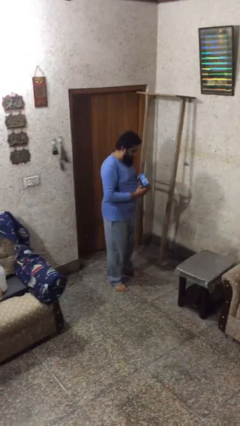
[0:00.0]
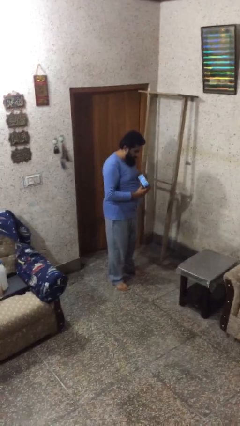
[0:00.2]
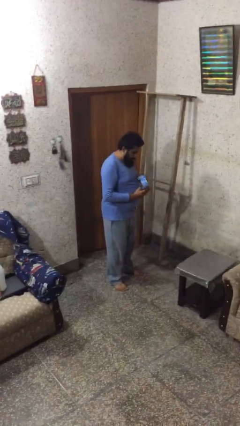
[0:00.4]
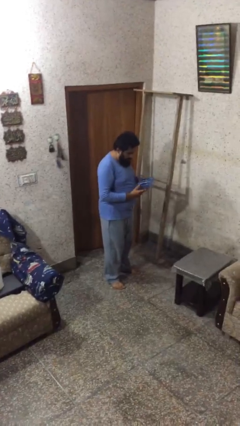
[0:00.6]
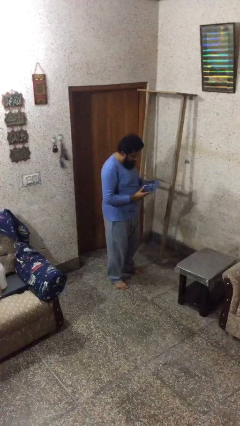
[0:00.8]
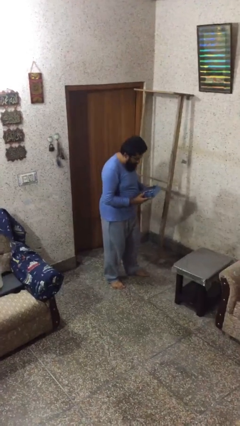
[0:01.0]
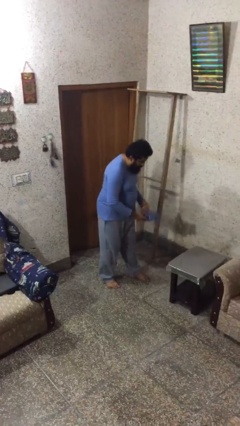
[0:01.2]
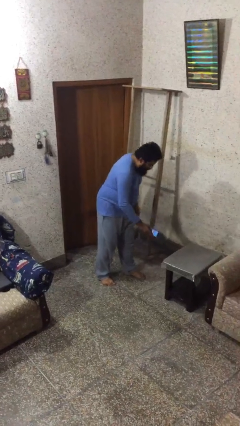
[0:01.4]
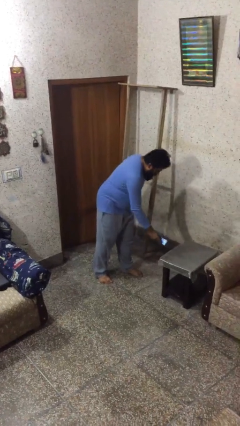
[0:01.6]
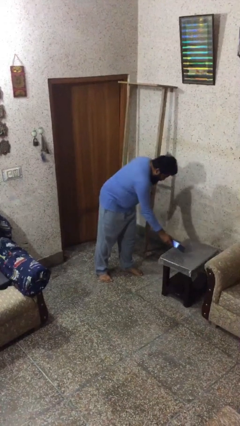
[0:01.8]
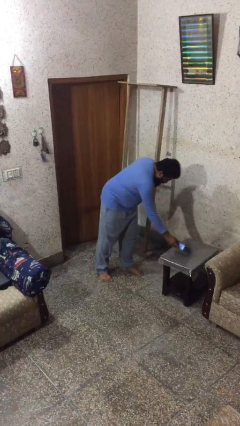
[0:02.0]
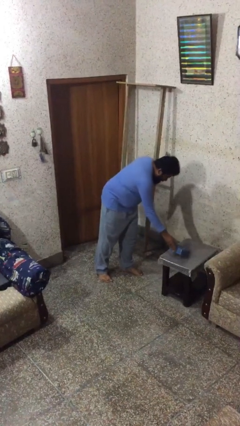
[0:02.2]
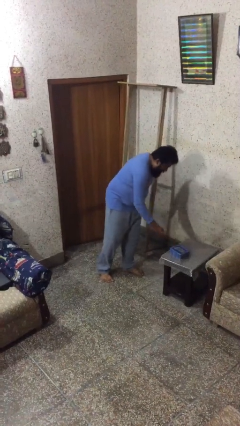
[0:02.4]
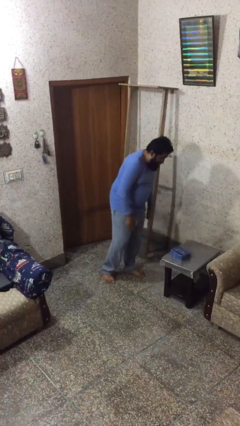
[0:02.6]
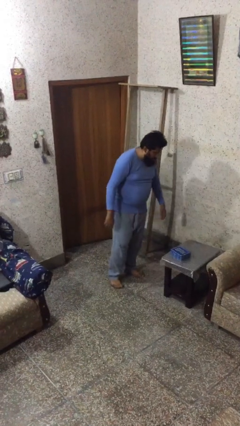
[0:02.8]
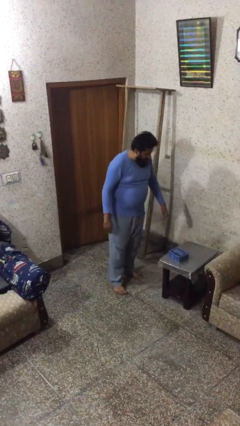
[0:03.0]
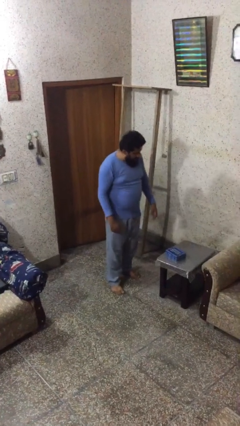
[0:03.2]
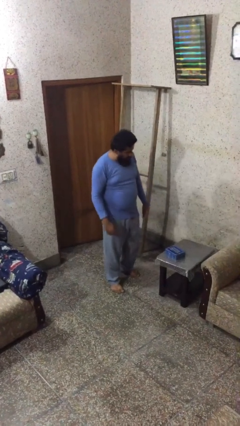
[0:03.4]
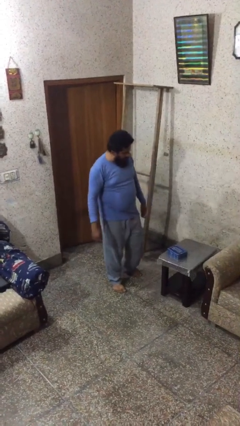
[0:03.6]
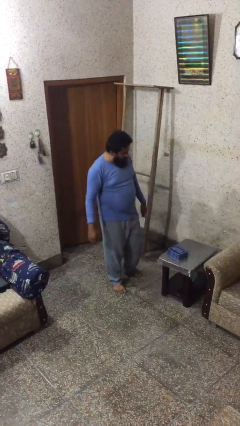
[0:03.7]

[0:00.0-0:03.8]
person puts down object on table

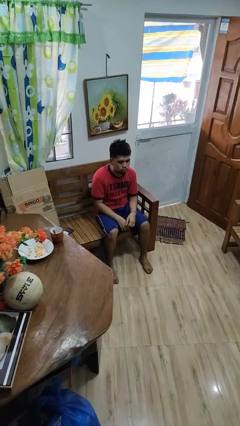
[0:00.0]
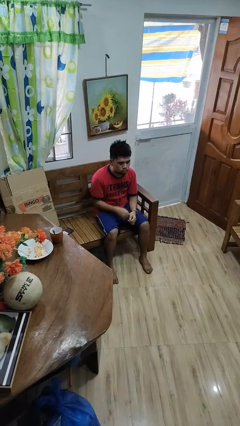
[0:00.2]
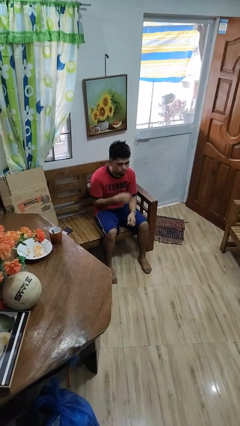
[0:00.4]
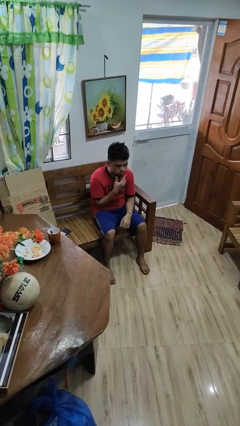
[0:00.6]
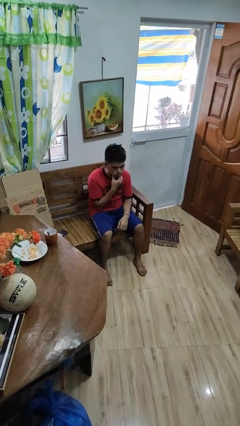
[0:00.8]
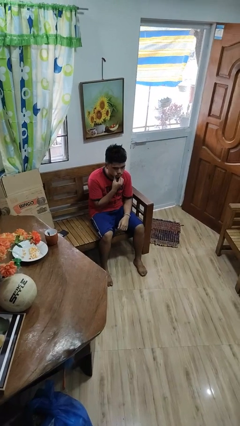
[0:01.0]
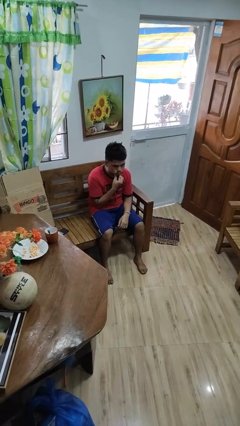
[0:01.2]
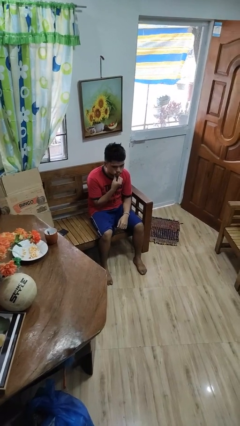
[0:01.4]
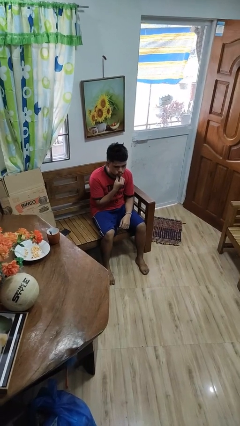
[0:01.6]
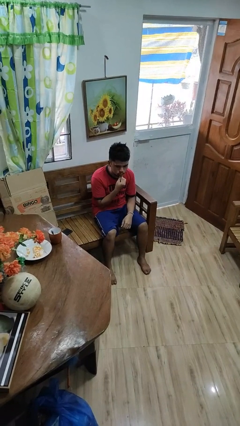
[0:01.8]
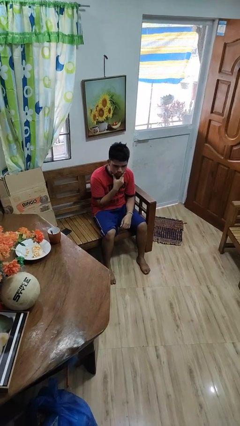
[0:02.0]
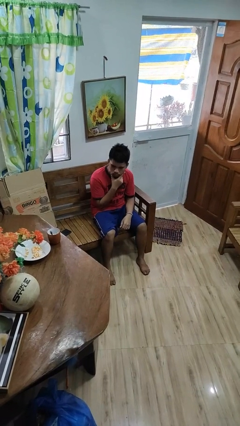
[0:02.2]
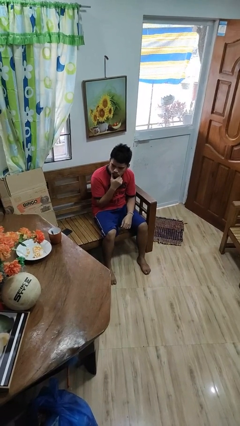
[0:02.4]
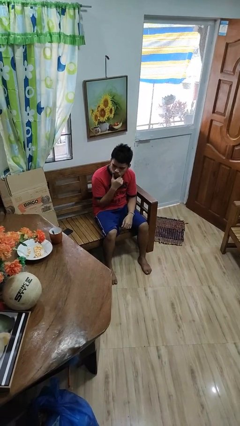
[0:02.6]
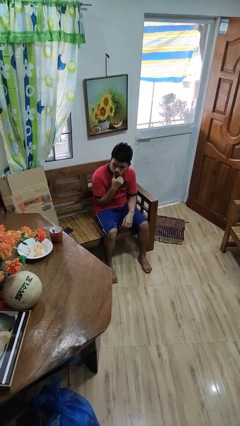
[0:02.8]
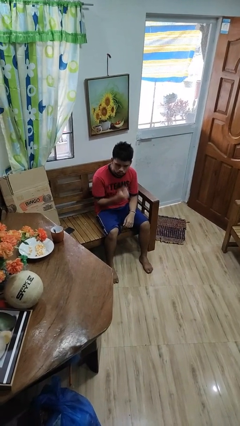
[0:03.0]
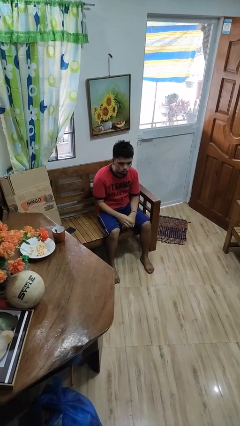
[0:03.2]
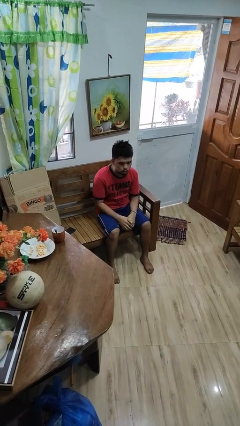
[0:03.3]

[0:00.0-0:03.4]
person strokes chin

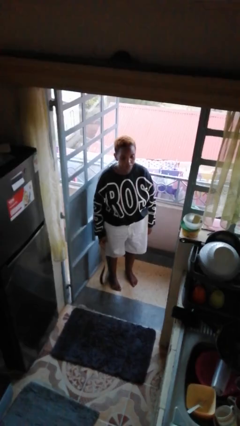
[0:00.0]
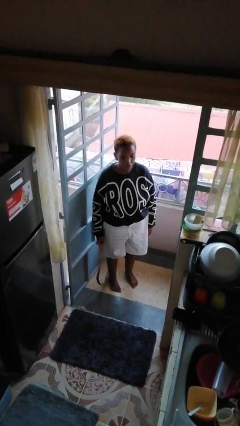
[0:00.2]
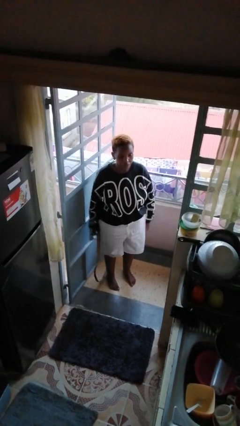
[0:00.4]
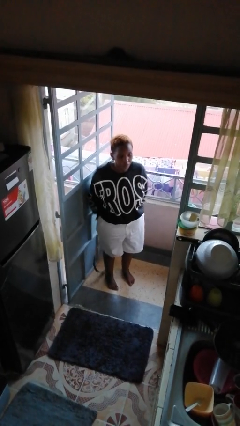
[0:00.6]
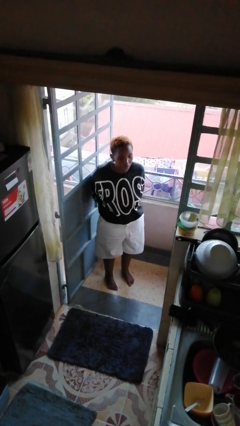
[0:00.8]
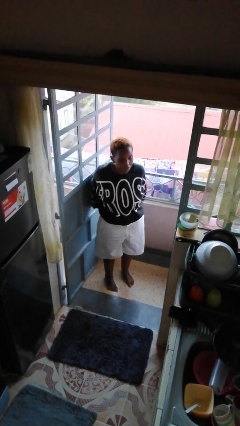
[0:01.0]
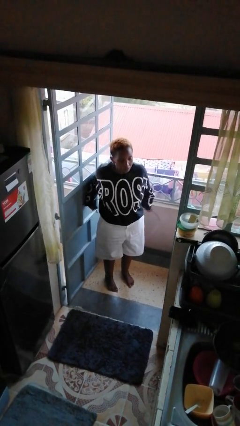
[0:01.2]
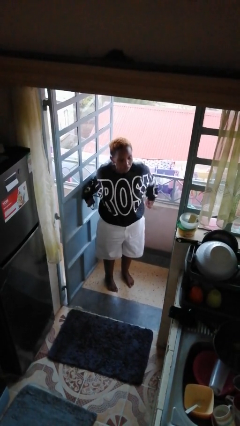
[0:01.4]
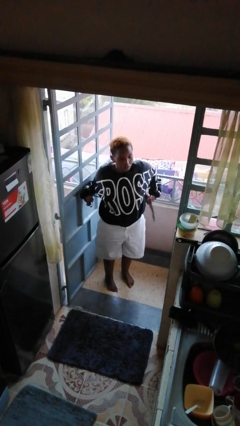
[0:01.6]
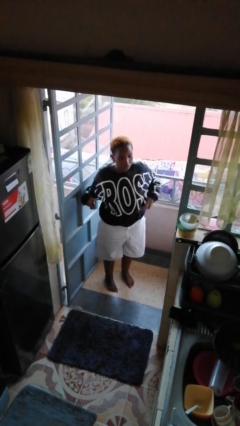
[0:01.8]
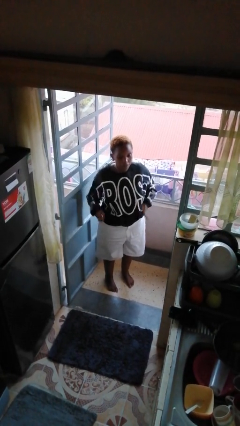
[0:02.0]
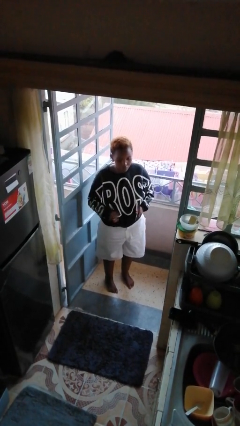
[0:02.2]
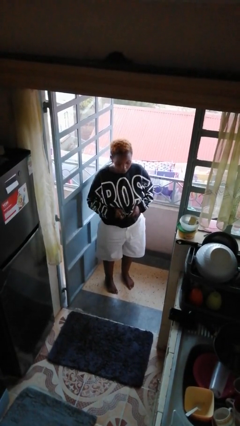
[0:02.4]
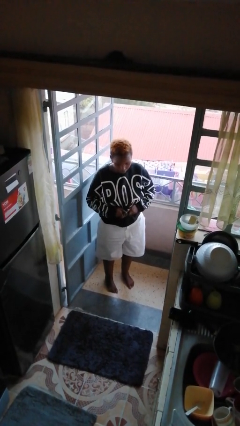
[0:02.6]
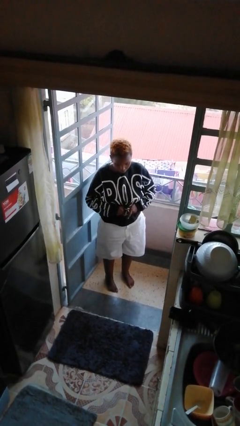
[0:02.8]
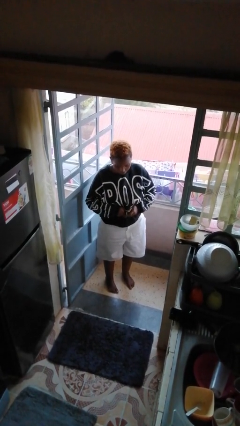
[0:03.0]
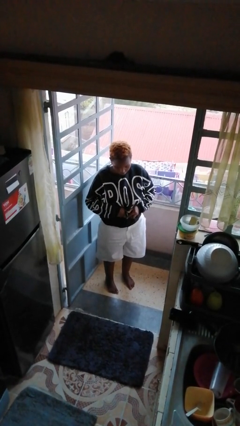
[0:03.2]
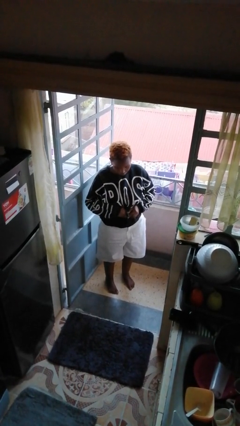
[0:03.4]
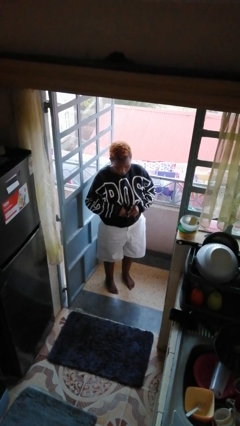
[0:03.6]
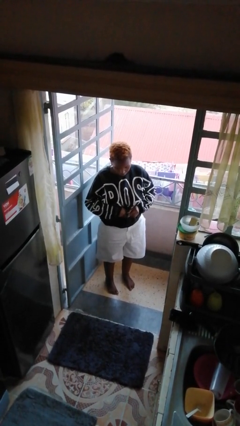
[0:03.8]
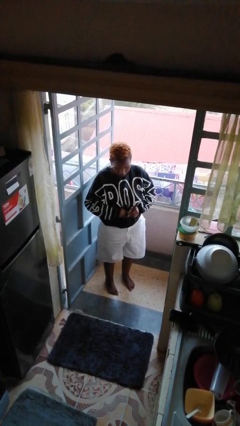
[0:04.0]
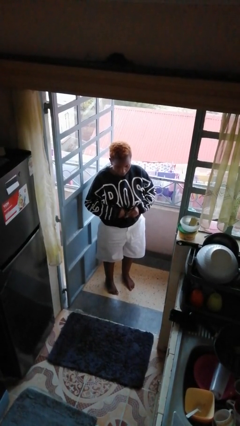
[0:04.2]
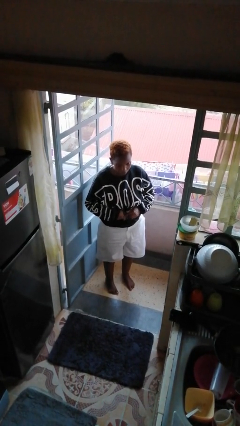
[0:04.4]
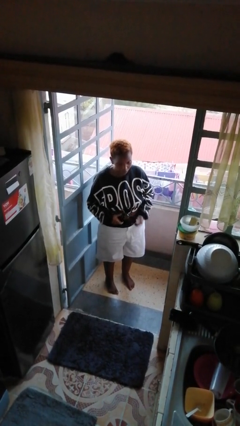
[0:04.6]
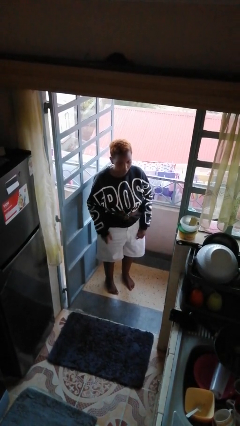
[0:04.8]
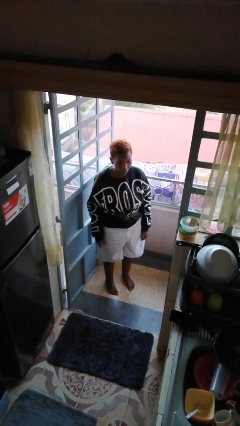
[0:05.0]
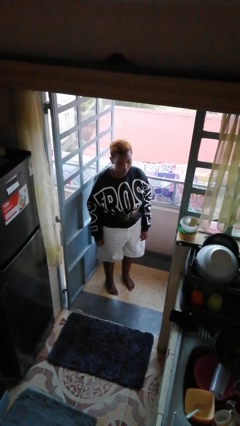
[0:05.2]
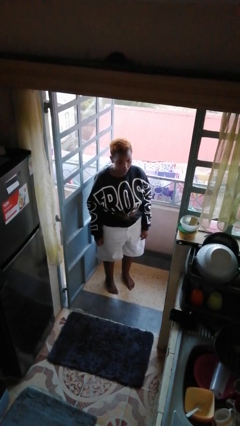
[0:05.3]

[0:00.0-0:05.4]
person puts on belt

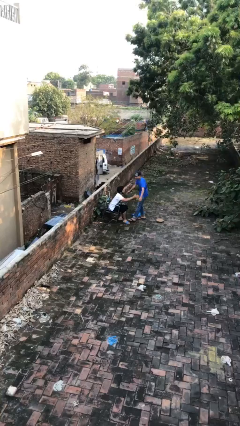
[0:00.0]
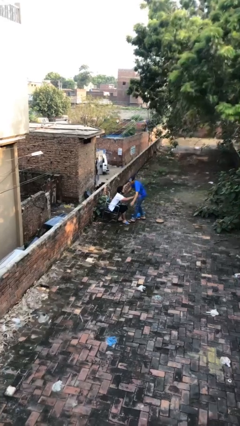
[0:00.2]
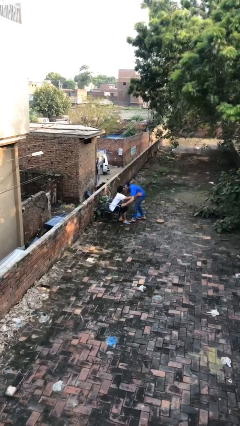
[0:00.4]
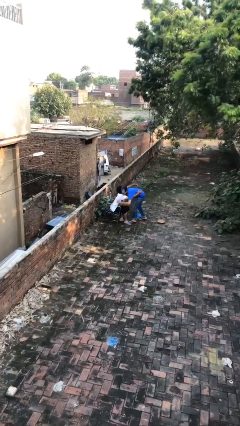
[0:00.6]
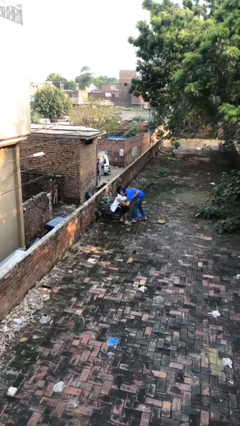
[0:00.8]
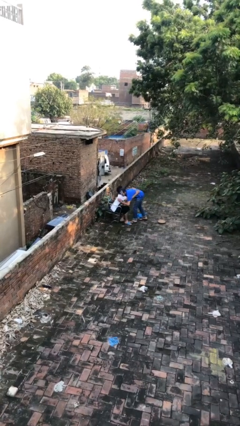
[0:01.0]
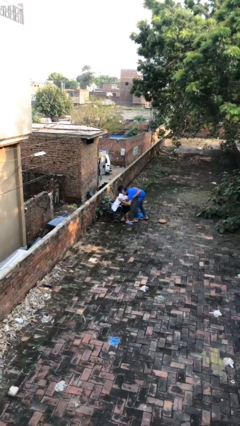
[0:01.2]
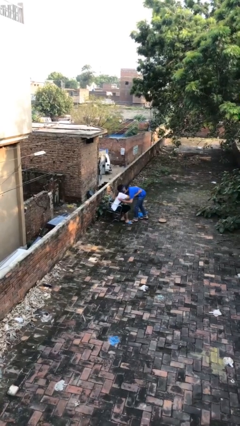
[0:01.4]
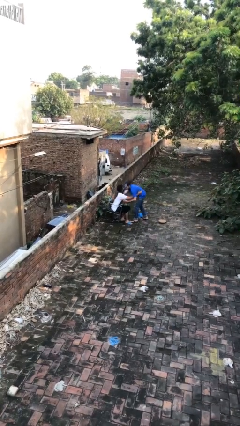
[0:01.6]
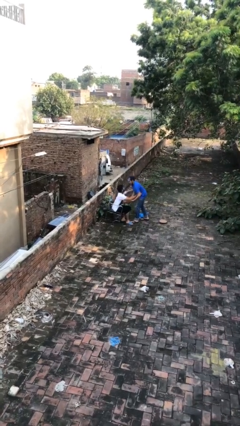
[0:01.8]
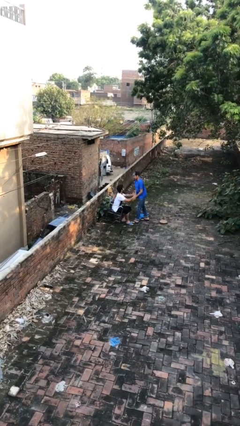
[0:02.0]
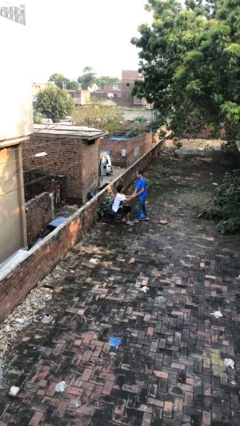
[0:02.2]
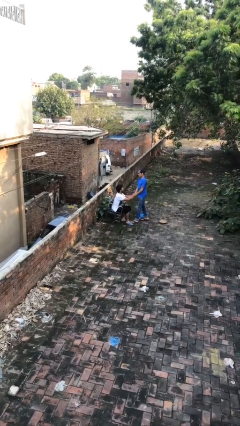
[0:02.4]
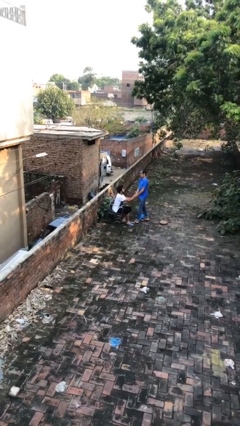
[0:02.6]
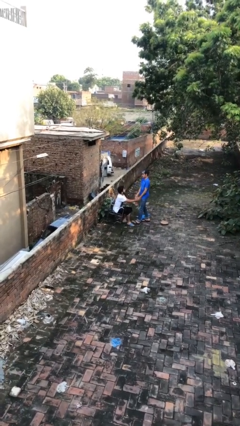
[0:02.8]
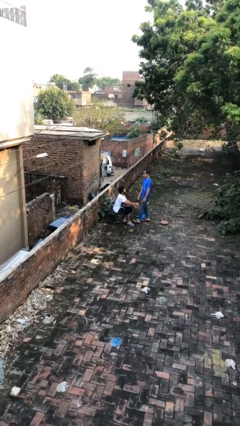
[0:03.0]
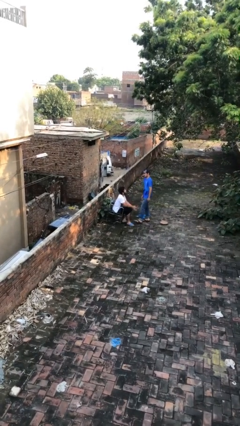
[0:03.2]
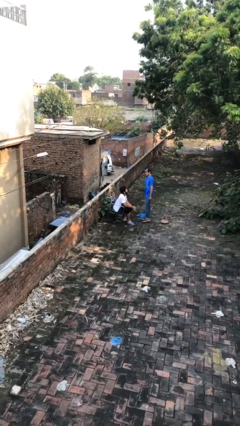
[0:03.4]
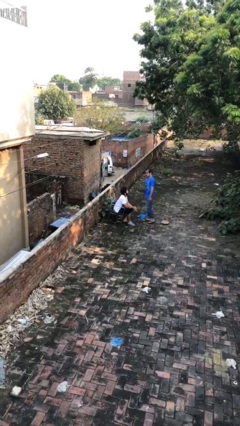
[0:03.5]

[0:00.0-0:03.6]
person embraces person

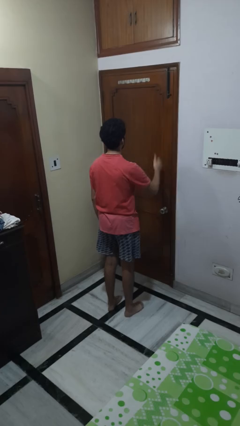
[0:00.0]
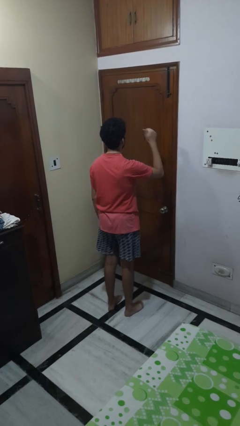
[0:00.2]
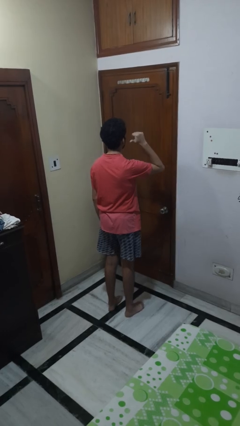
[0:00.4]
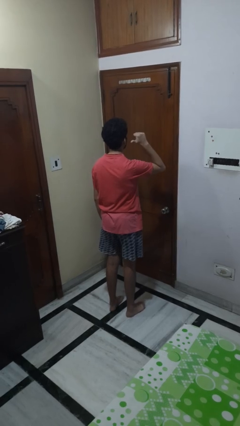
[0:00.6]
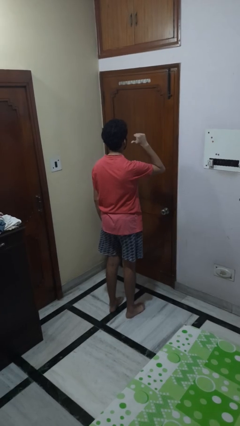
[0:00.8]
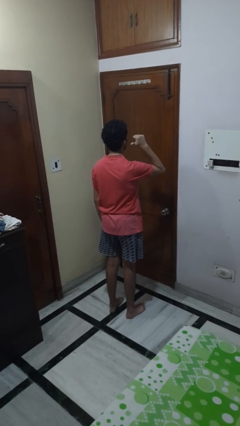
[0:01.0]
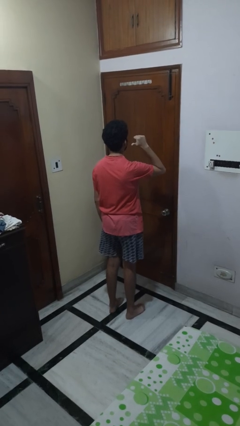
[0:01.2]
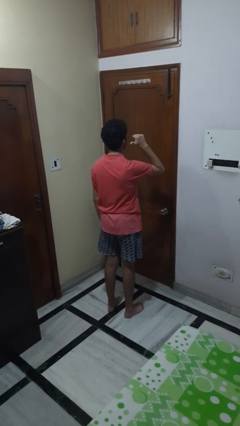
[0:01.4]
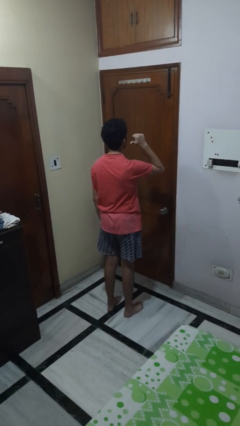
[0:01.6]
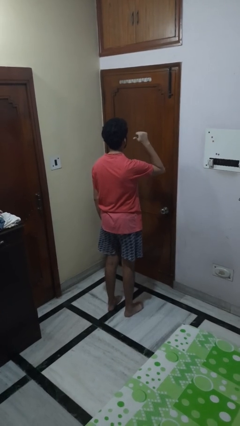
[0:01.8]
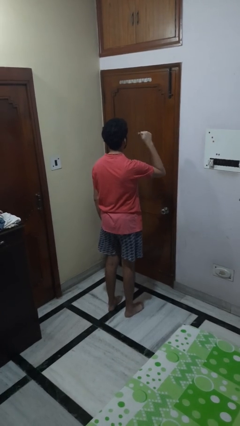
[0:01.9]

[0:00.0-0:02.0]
person gestures behind me
